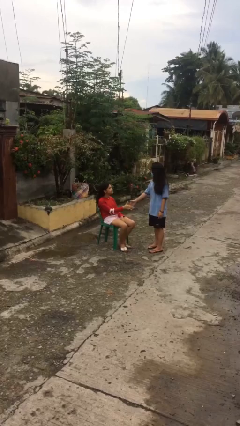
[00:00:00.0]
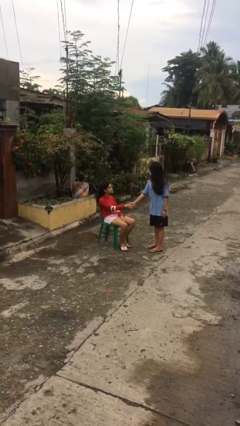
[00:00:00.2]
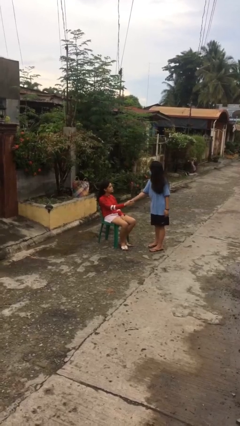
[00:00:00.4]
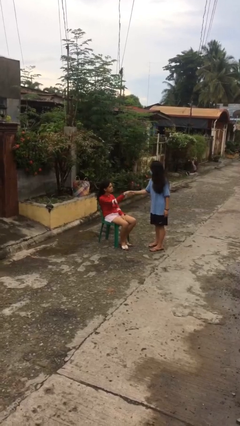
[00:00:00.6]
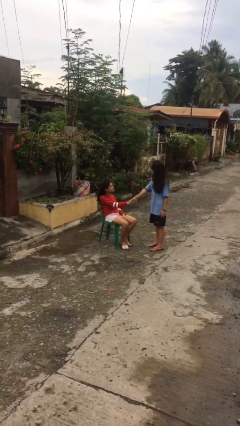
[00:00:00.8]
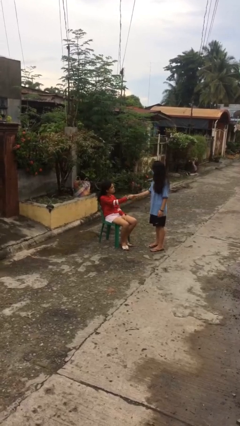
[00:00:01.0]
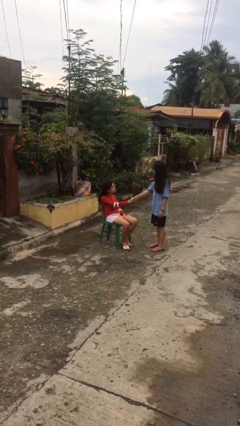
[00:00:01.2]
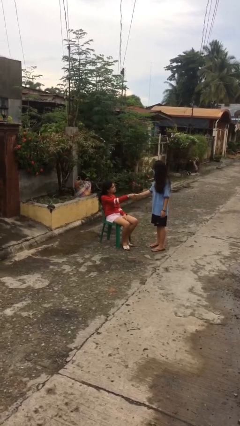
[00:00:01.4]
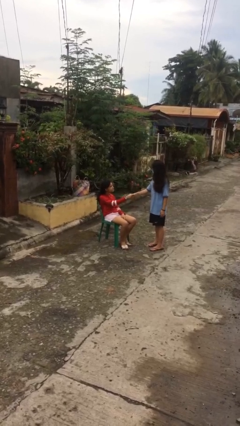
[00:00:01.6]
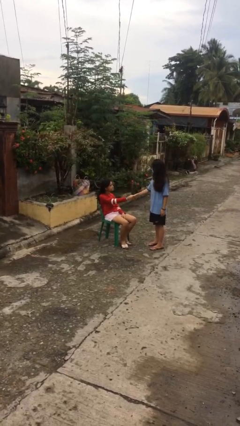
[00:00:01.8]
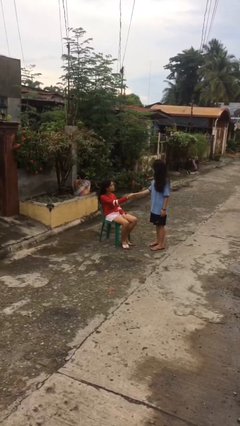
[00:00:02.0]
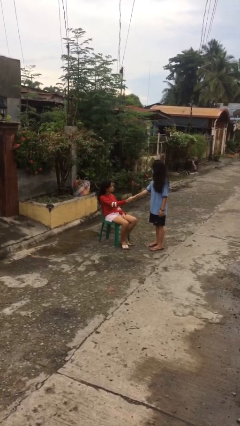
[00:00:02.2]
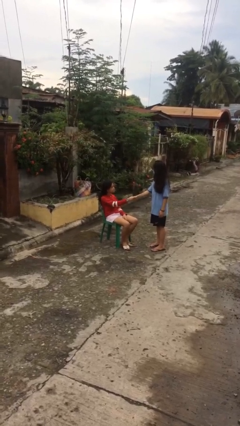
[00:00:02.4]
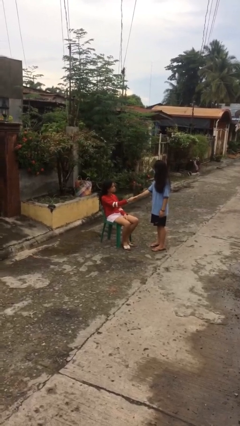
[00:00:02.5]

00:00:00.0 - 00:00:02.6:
person shakes hand

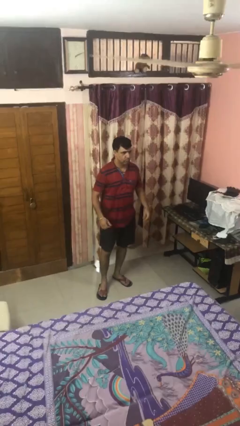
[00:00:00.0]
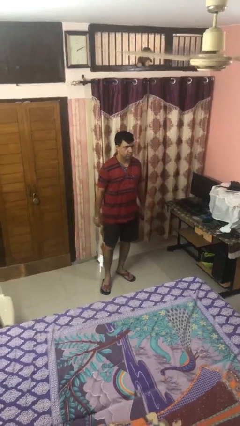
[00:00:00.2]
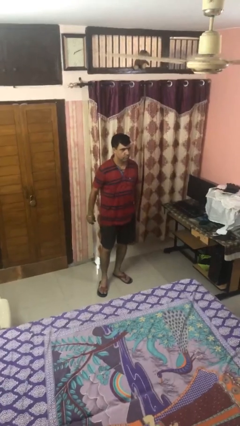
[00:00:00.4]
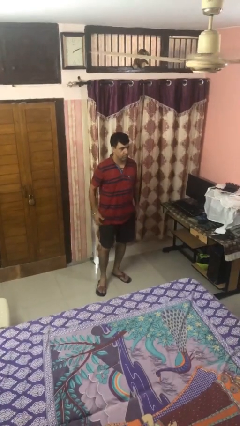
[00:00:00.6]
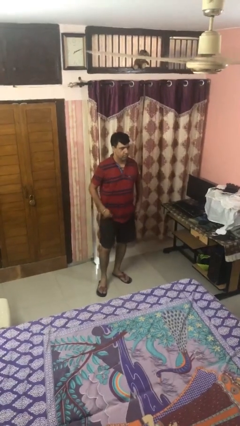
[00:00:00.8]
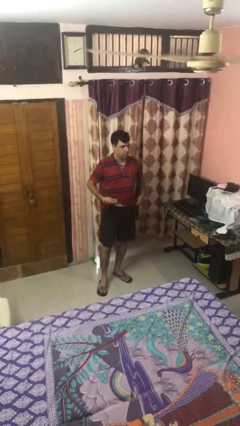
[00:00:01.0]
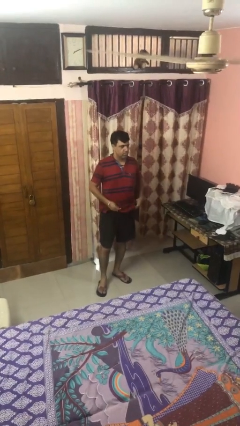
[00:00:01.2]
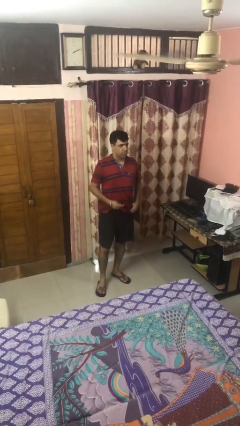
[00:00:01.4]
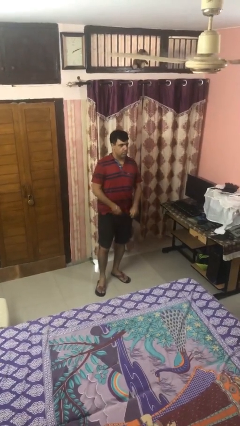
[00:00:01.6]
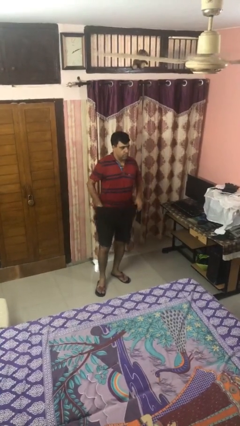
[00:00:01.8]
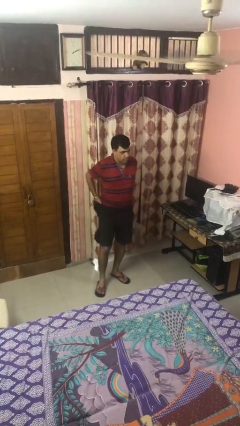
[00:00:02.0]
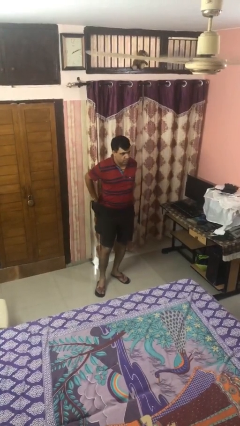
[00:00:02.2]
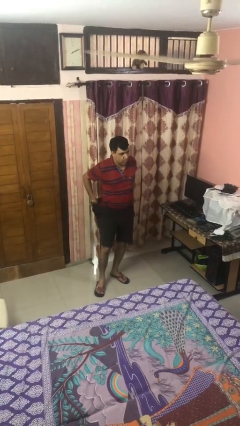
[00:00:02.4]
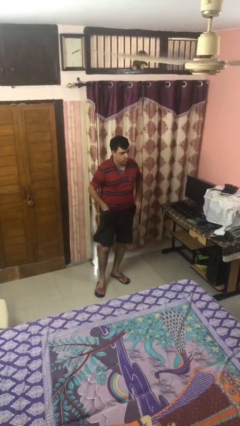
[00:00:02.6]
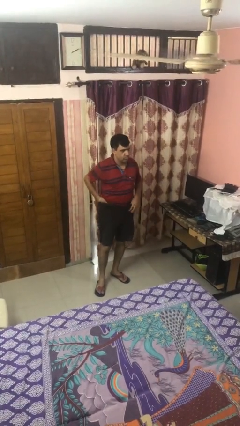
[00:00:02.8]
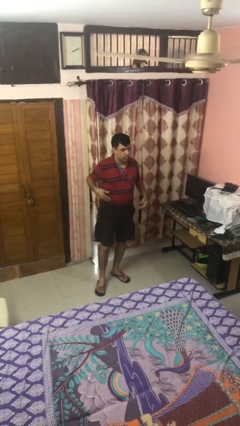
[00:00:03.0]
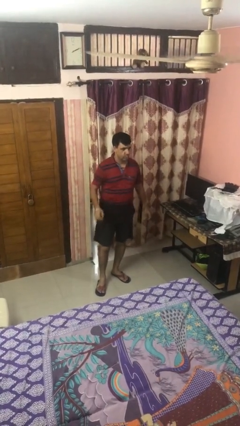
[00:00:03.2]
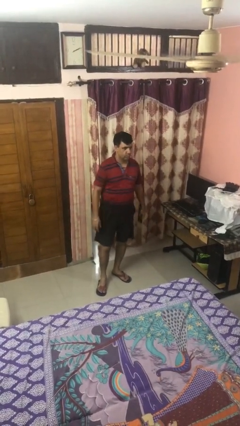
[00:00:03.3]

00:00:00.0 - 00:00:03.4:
person tucks in shirt

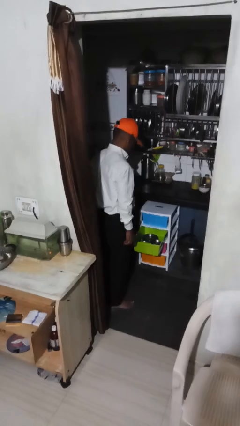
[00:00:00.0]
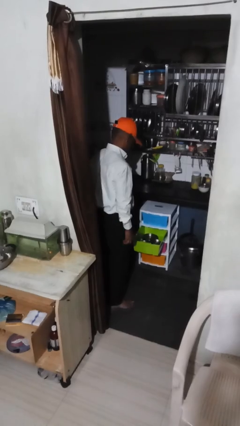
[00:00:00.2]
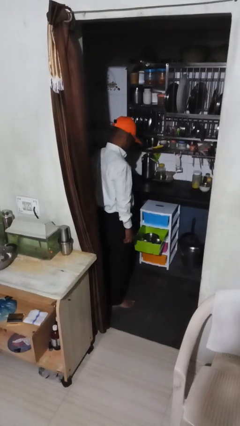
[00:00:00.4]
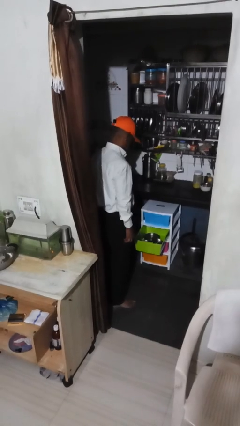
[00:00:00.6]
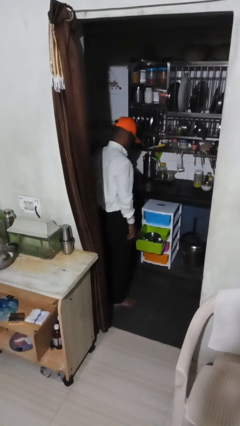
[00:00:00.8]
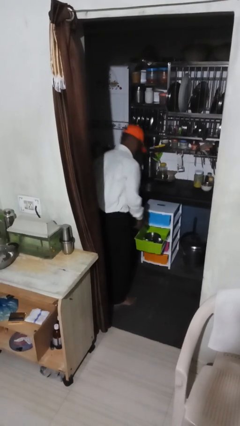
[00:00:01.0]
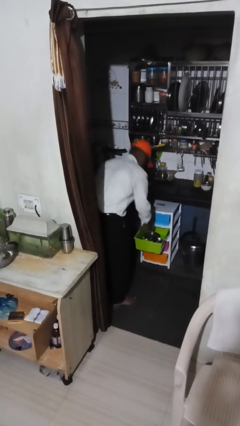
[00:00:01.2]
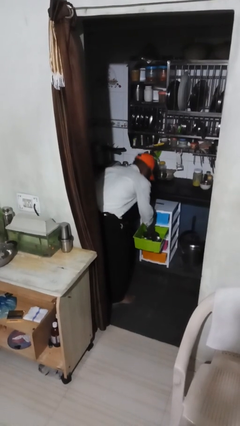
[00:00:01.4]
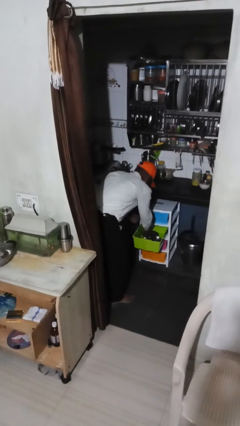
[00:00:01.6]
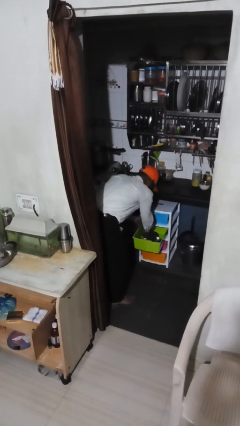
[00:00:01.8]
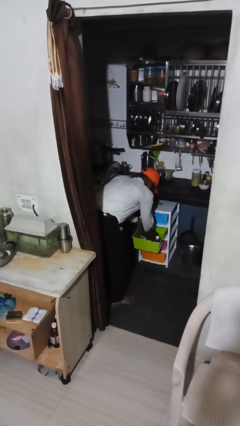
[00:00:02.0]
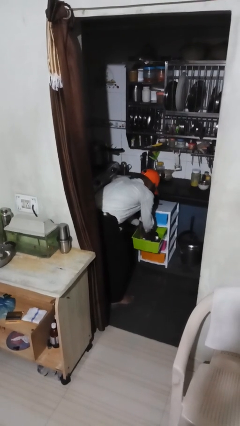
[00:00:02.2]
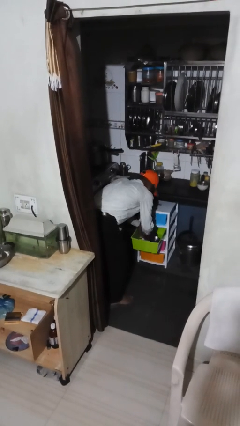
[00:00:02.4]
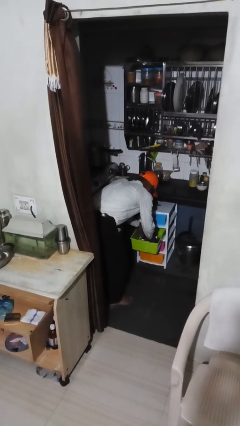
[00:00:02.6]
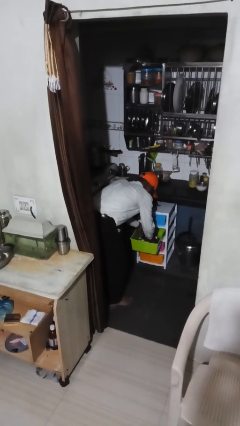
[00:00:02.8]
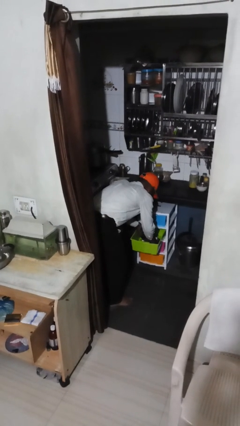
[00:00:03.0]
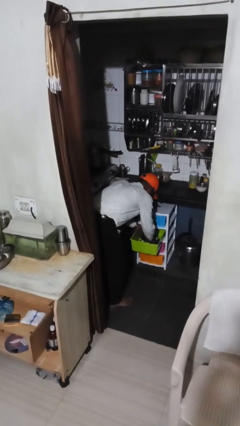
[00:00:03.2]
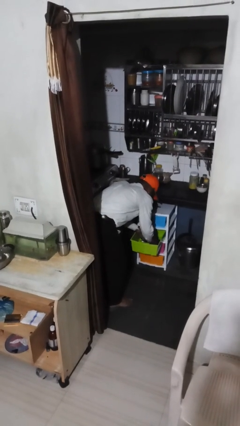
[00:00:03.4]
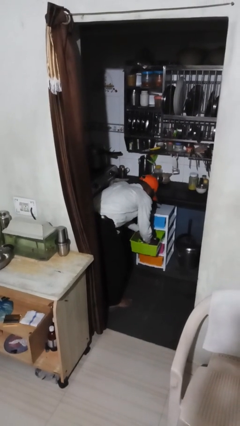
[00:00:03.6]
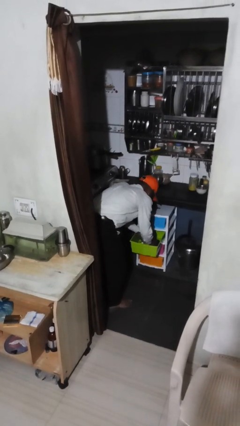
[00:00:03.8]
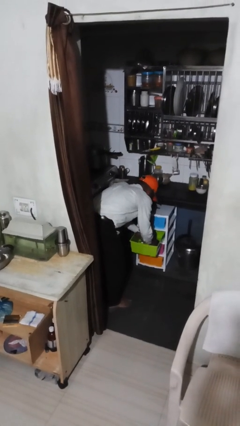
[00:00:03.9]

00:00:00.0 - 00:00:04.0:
person searches in kitchen drawer

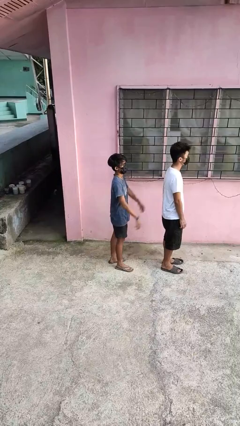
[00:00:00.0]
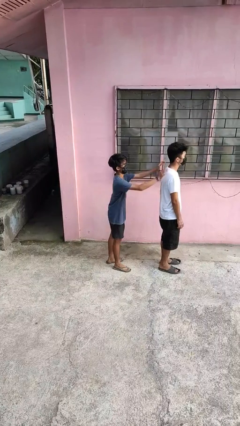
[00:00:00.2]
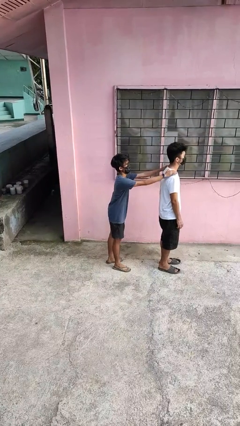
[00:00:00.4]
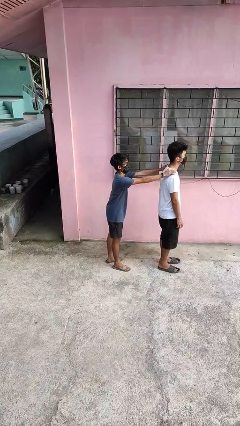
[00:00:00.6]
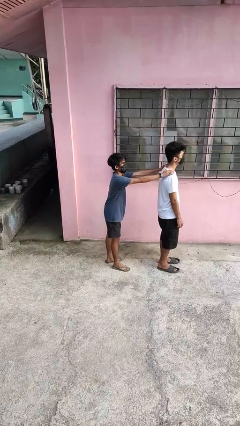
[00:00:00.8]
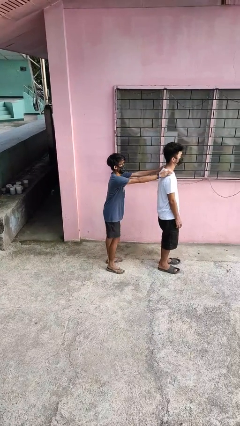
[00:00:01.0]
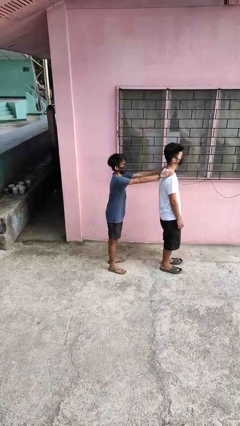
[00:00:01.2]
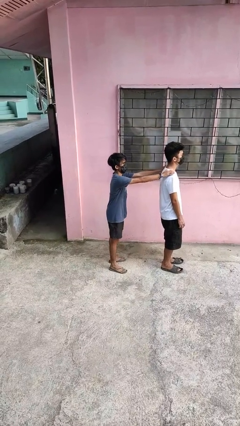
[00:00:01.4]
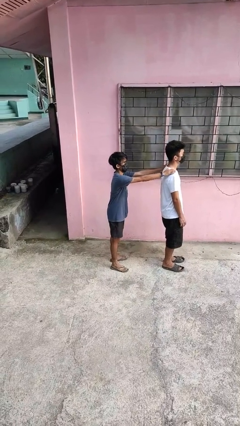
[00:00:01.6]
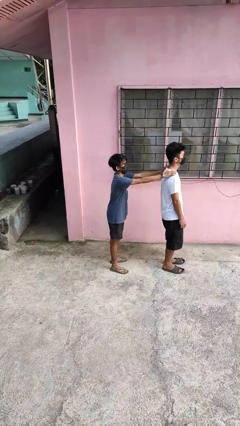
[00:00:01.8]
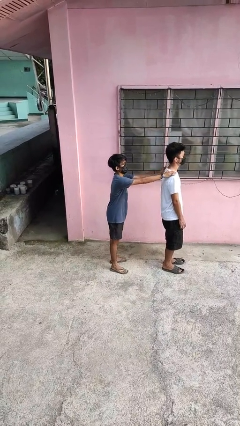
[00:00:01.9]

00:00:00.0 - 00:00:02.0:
person grabs person by shoulder

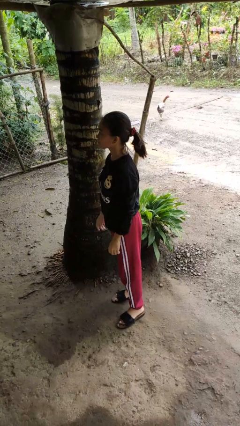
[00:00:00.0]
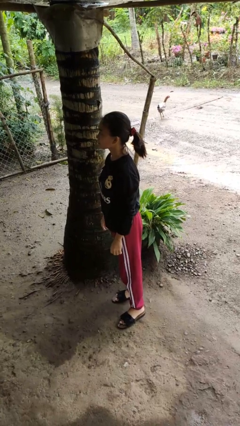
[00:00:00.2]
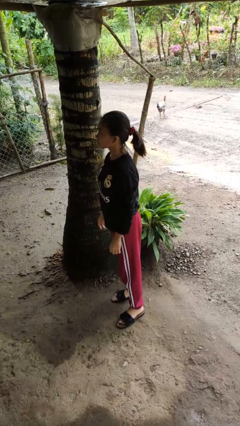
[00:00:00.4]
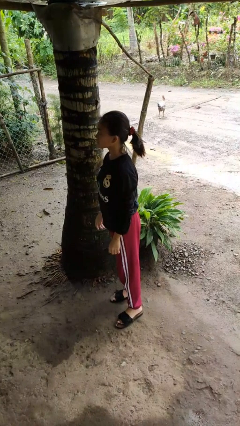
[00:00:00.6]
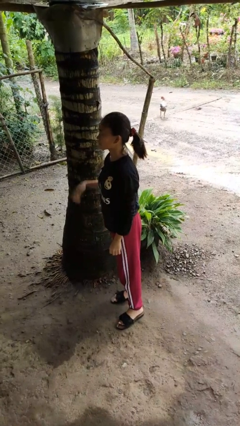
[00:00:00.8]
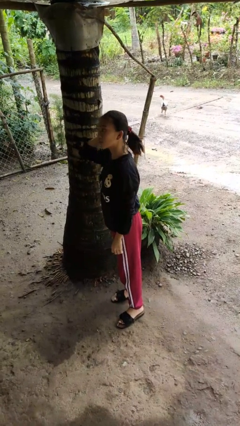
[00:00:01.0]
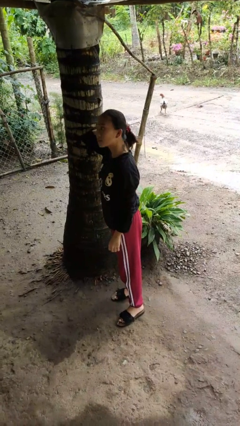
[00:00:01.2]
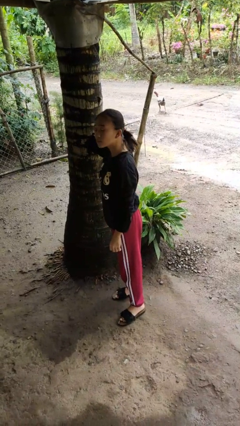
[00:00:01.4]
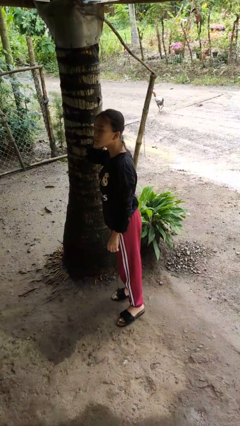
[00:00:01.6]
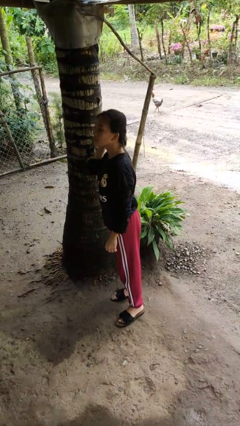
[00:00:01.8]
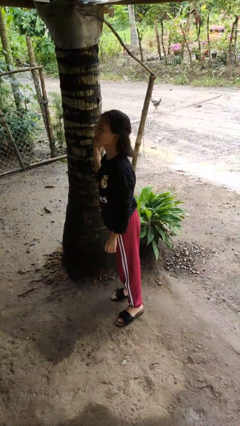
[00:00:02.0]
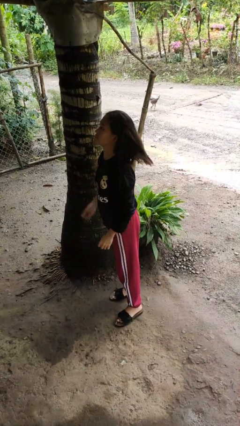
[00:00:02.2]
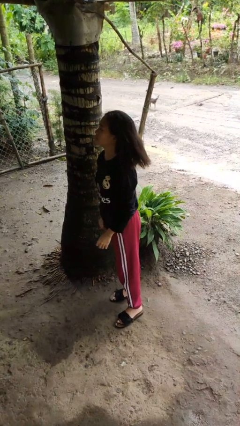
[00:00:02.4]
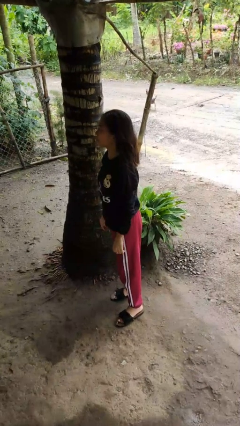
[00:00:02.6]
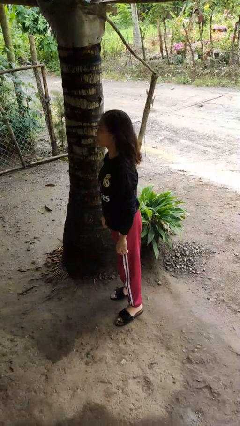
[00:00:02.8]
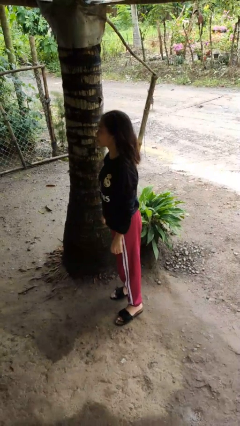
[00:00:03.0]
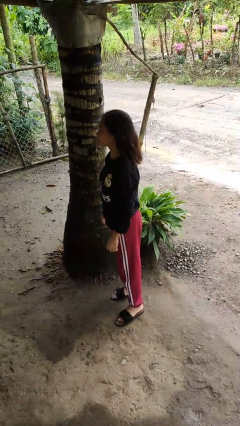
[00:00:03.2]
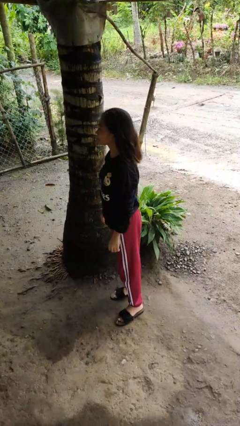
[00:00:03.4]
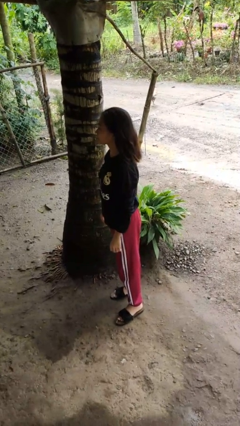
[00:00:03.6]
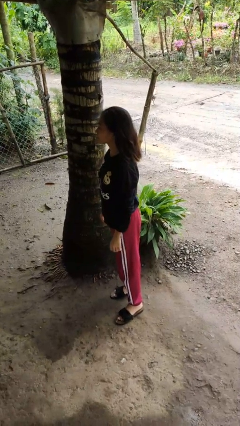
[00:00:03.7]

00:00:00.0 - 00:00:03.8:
person takes off hairtie

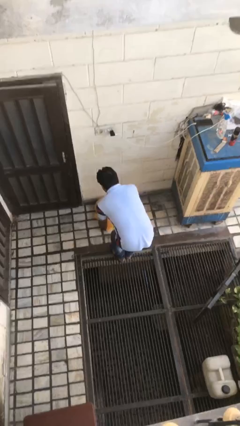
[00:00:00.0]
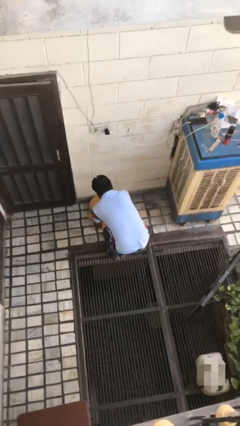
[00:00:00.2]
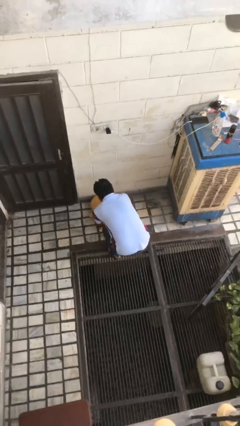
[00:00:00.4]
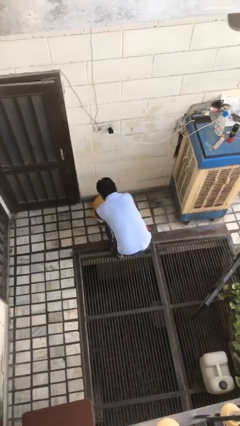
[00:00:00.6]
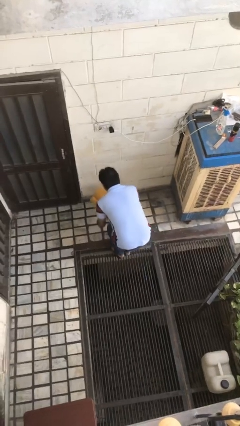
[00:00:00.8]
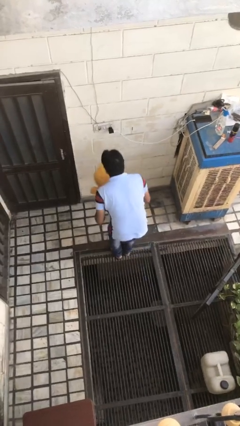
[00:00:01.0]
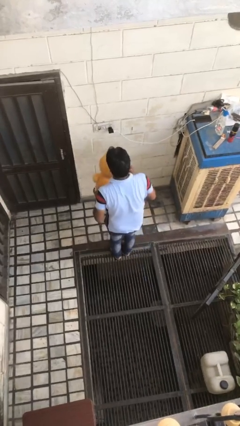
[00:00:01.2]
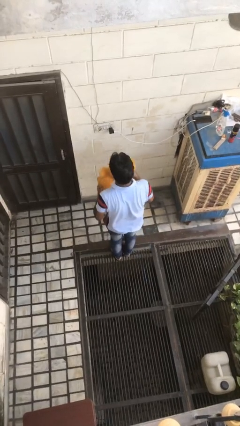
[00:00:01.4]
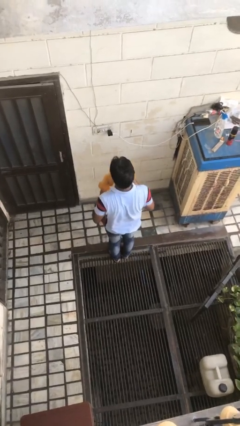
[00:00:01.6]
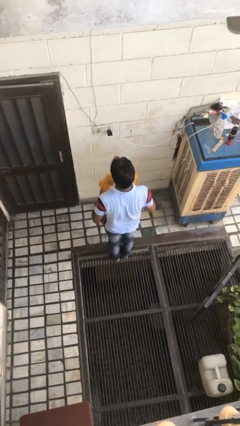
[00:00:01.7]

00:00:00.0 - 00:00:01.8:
person picks up object from floor
